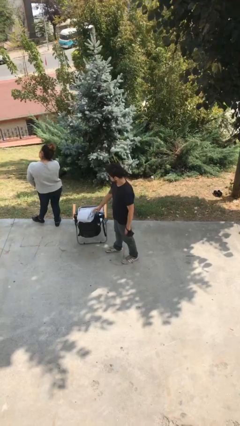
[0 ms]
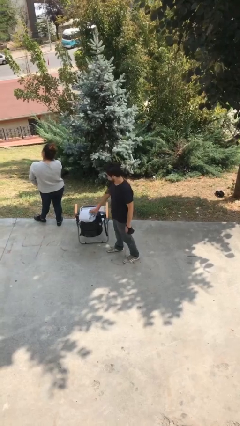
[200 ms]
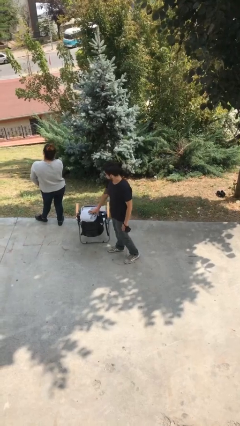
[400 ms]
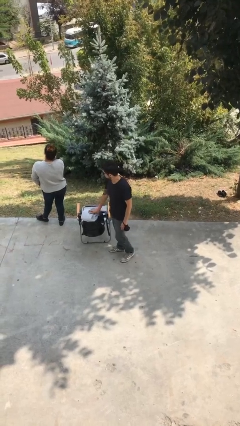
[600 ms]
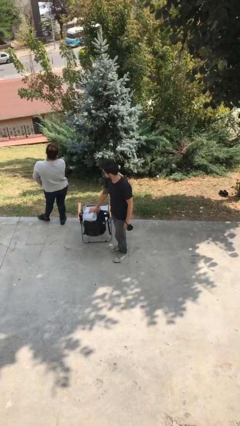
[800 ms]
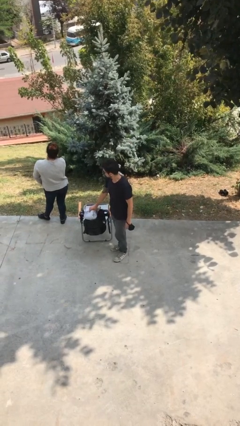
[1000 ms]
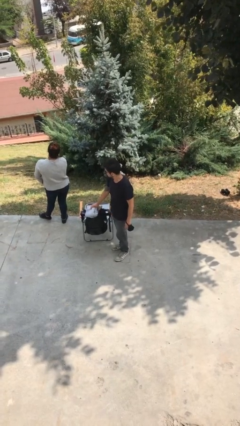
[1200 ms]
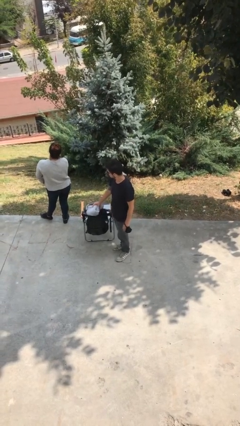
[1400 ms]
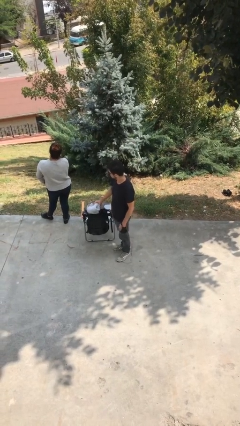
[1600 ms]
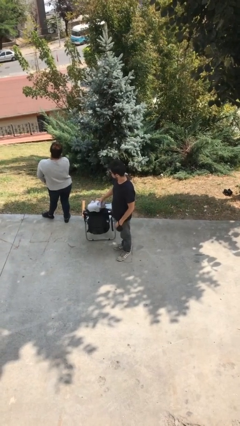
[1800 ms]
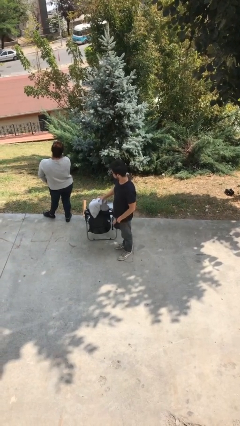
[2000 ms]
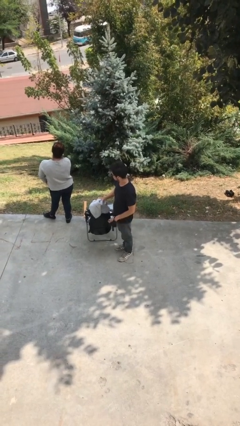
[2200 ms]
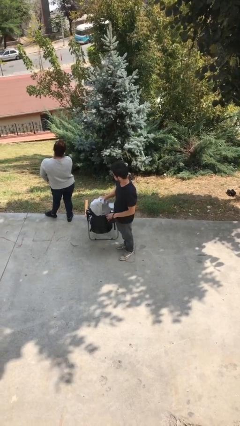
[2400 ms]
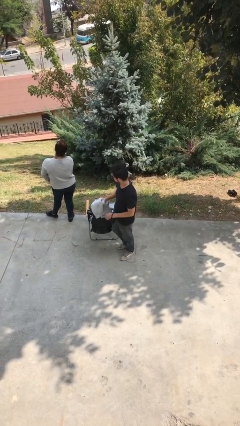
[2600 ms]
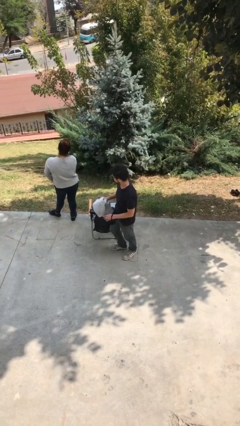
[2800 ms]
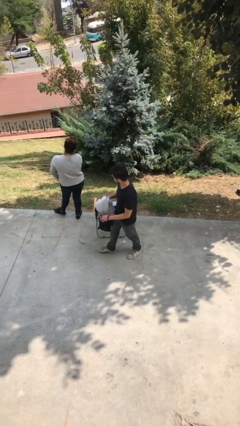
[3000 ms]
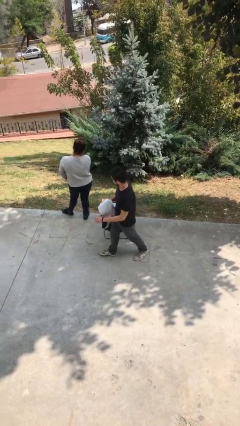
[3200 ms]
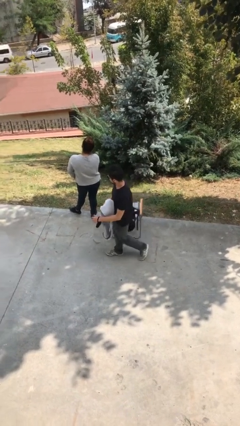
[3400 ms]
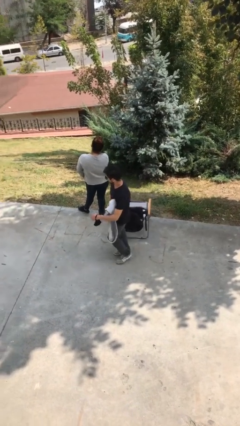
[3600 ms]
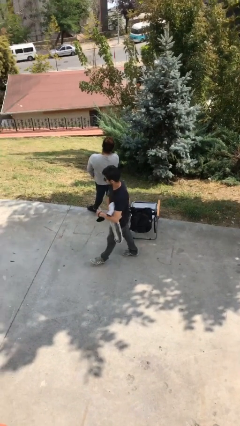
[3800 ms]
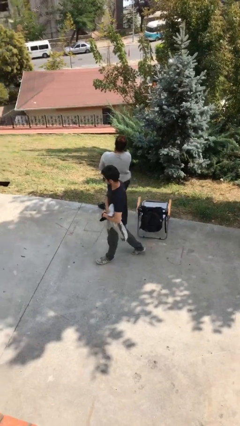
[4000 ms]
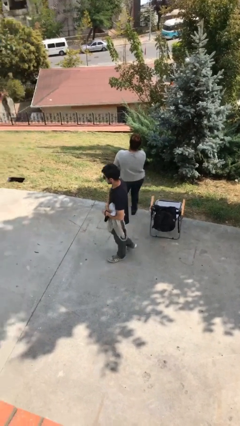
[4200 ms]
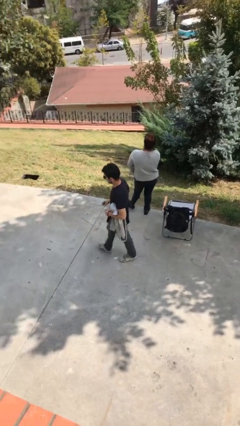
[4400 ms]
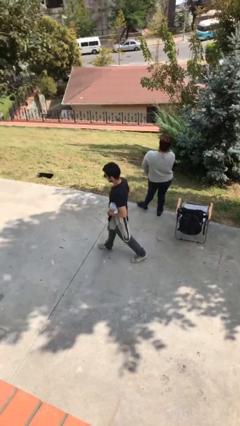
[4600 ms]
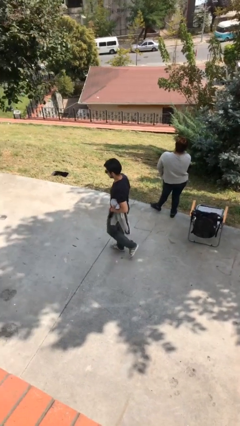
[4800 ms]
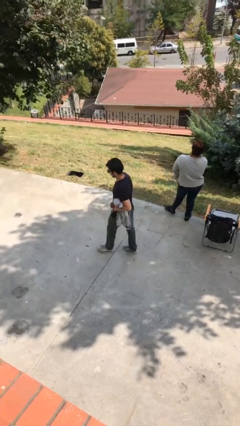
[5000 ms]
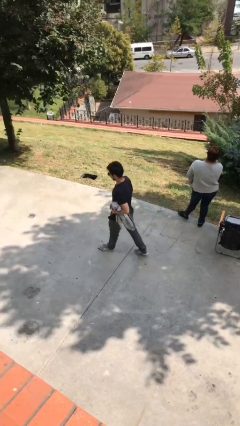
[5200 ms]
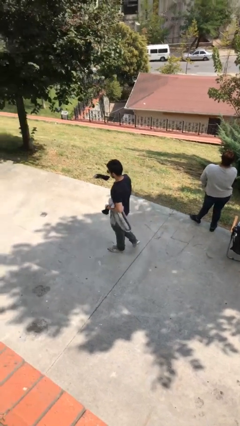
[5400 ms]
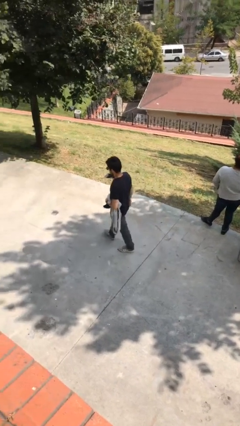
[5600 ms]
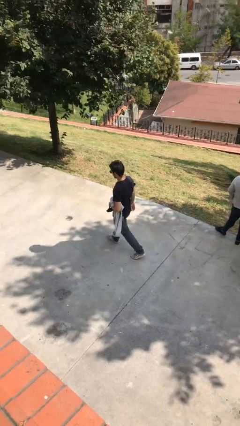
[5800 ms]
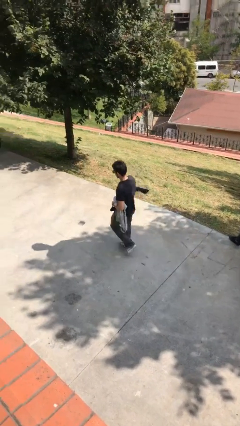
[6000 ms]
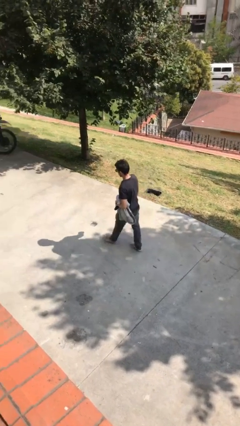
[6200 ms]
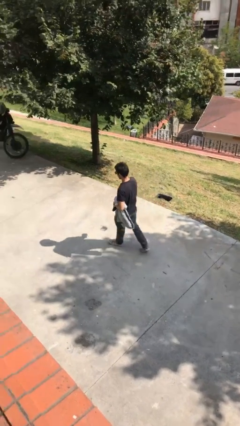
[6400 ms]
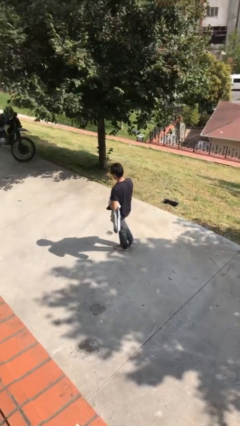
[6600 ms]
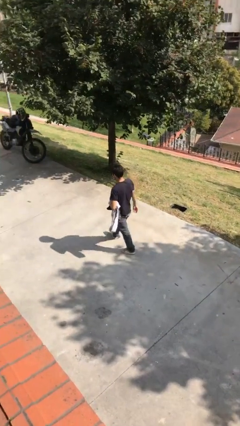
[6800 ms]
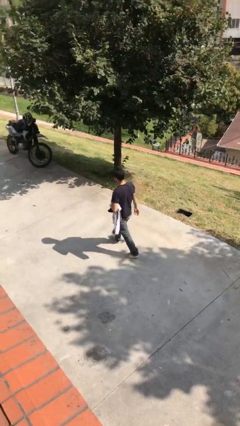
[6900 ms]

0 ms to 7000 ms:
person steals object from person

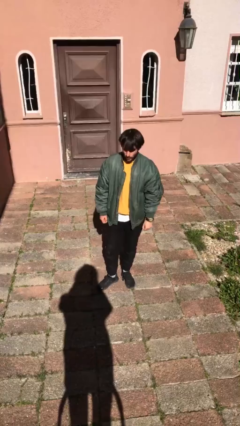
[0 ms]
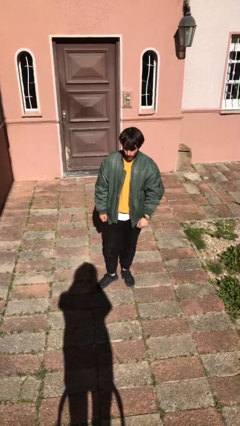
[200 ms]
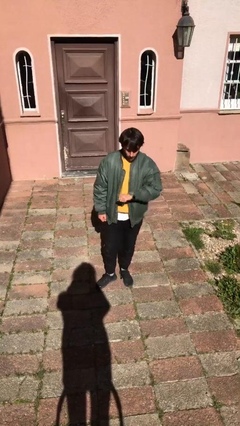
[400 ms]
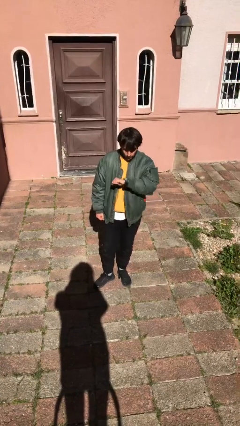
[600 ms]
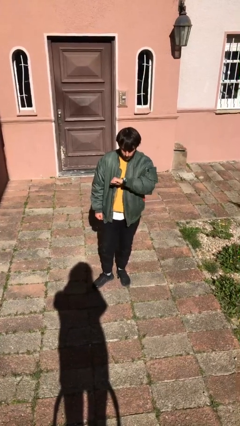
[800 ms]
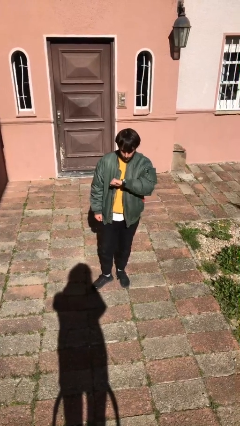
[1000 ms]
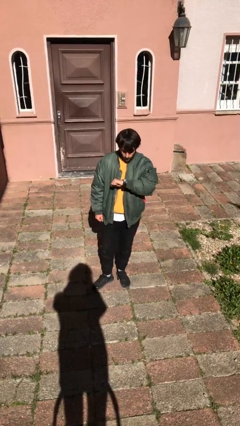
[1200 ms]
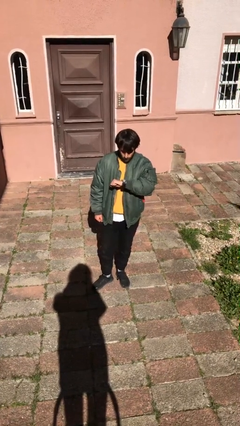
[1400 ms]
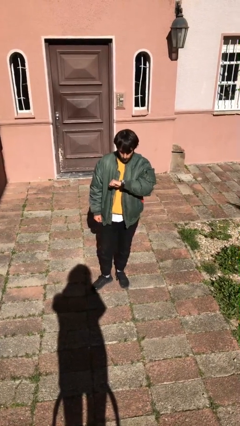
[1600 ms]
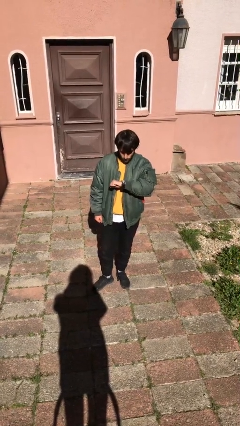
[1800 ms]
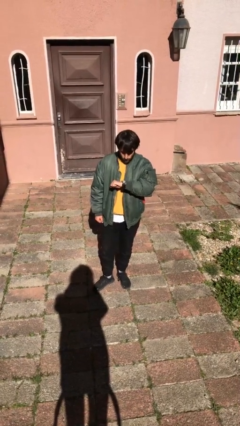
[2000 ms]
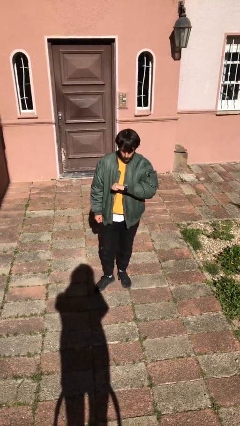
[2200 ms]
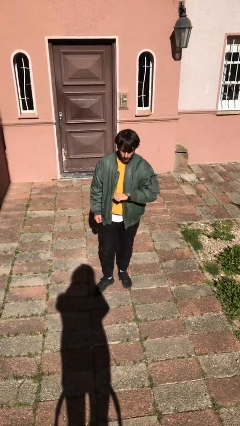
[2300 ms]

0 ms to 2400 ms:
person looks at wristwatch

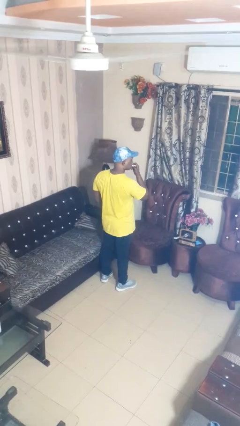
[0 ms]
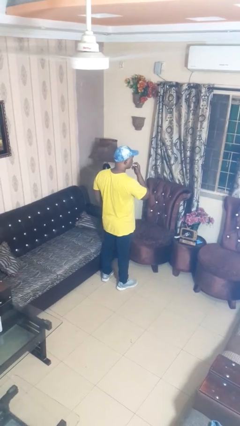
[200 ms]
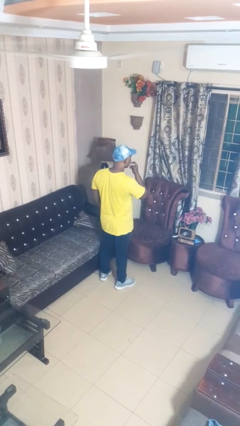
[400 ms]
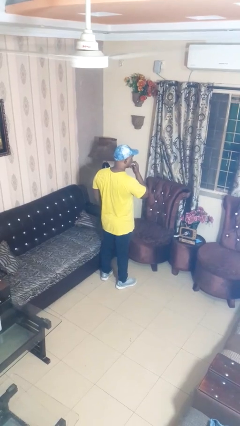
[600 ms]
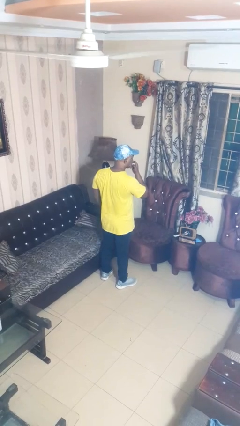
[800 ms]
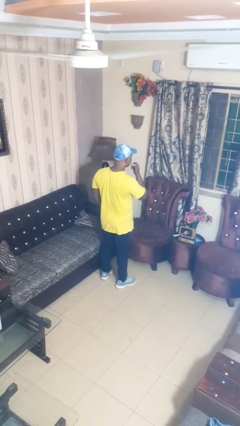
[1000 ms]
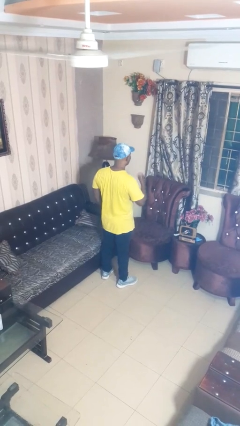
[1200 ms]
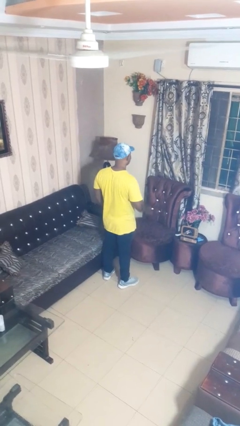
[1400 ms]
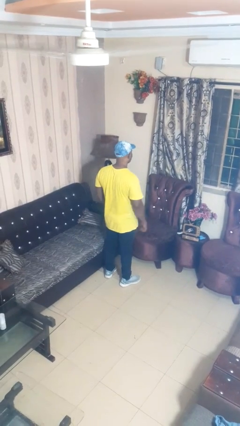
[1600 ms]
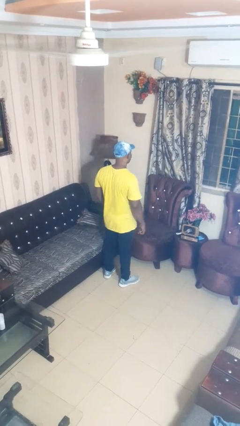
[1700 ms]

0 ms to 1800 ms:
person applies lip makeup

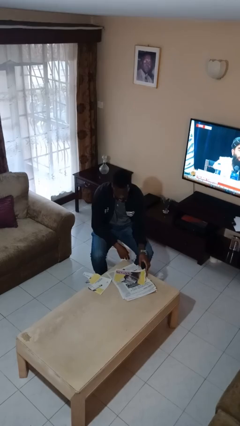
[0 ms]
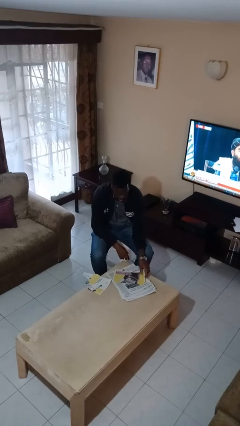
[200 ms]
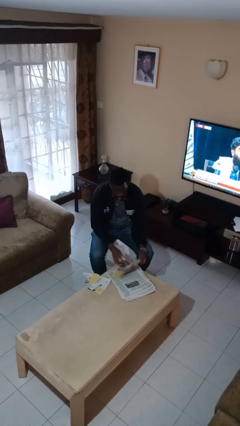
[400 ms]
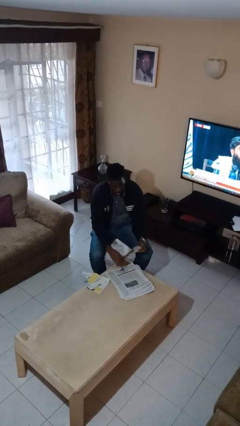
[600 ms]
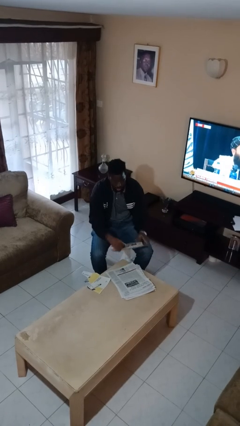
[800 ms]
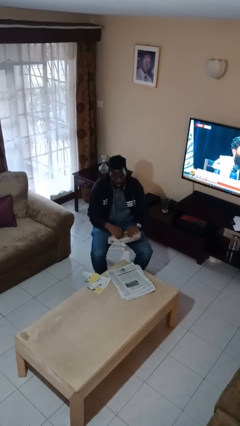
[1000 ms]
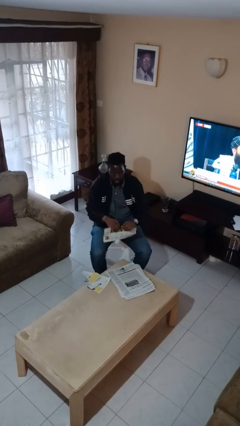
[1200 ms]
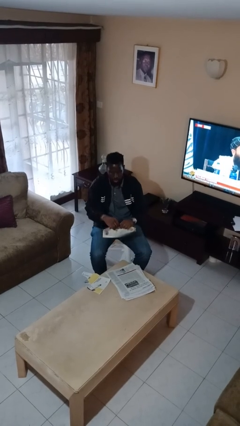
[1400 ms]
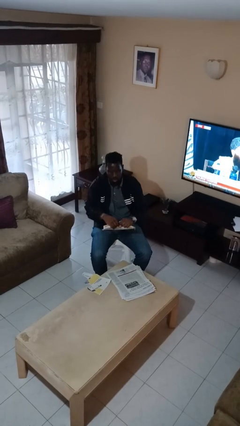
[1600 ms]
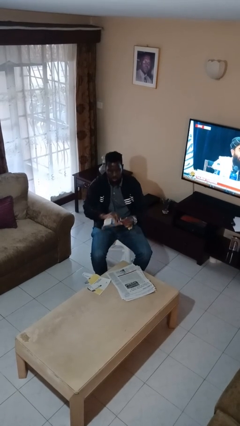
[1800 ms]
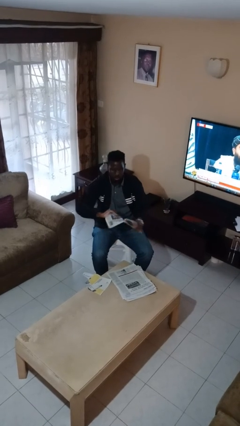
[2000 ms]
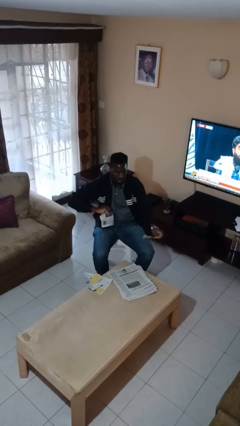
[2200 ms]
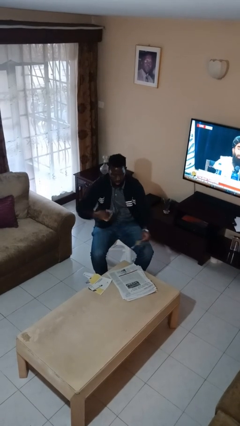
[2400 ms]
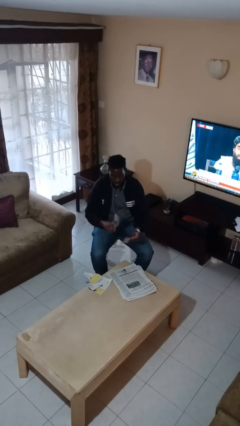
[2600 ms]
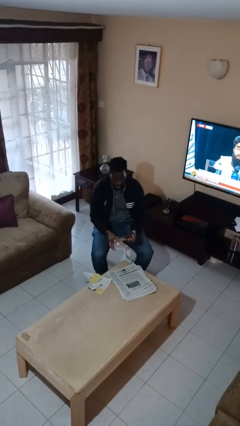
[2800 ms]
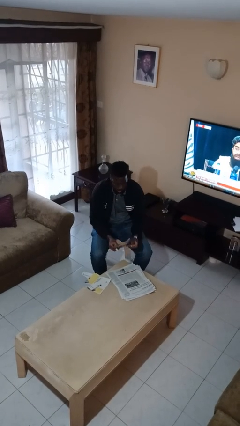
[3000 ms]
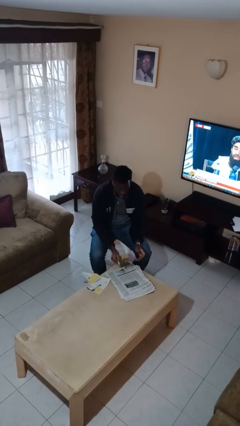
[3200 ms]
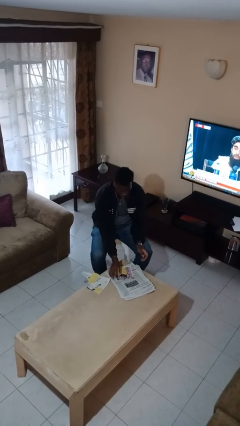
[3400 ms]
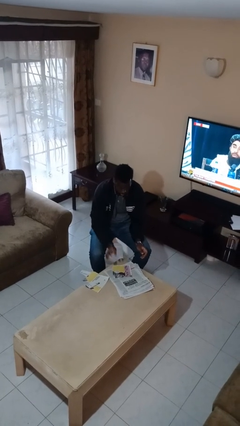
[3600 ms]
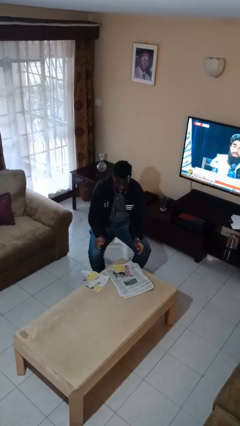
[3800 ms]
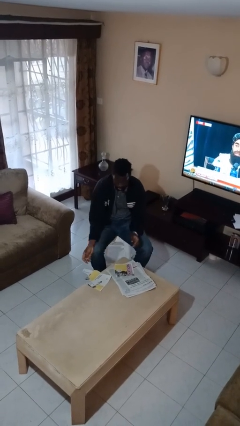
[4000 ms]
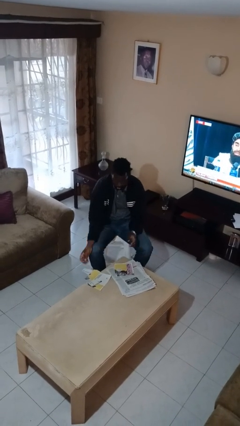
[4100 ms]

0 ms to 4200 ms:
person tears paper

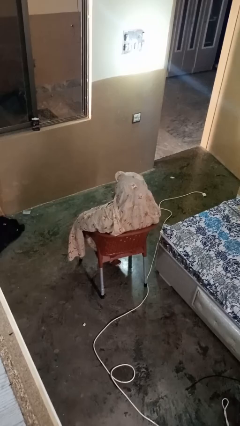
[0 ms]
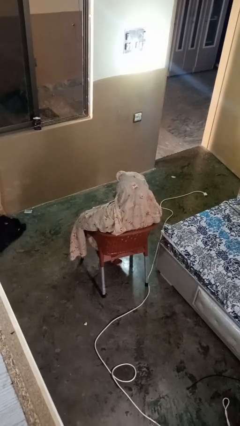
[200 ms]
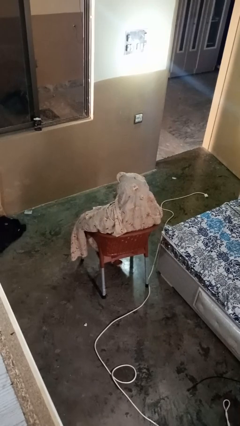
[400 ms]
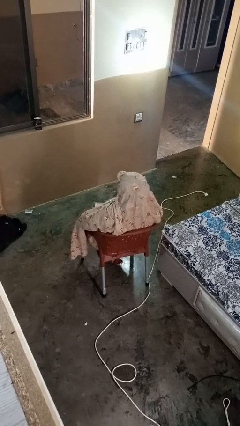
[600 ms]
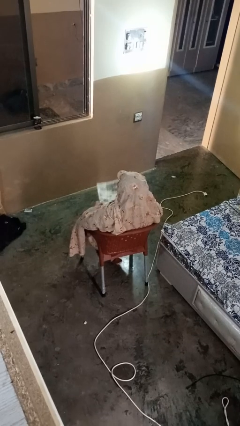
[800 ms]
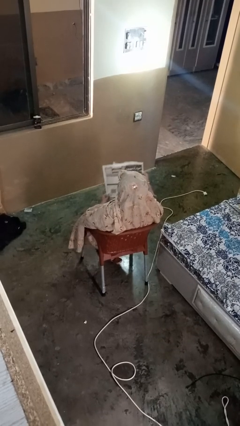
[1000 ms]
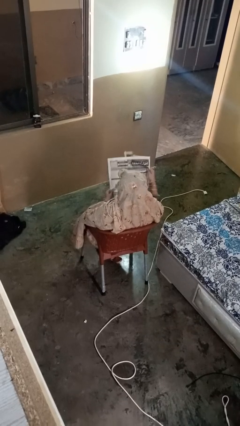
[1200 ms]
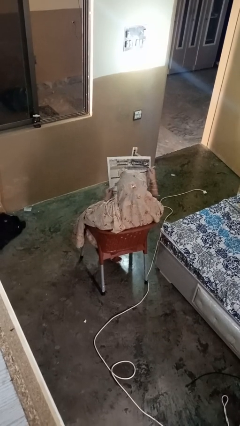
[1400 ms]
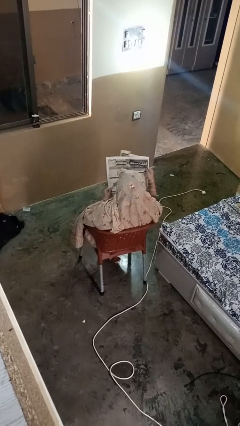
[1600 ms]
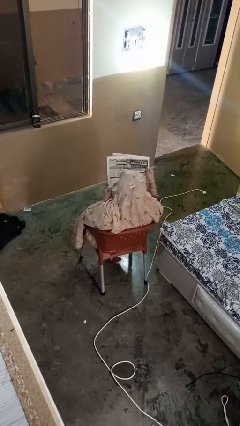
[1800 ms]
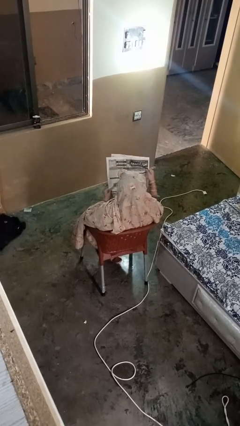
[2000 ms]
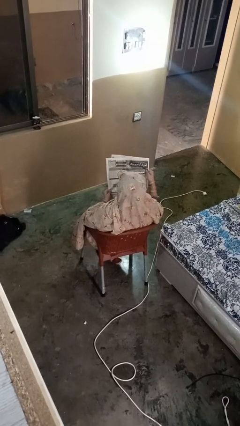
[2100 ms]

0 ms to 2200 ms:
person reads newspaper

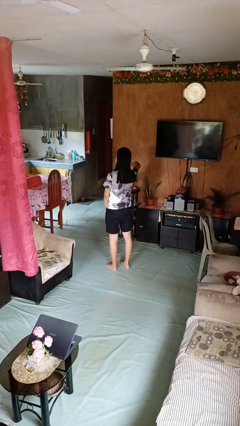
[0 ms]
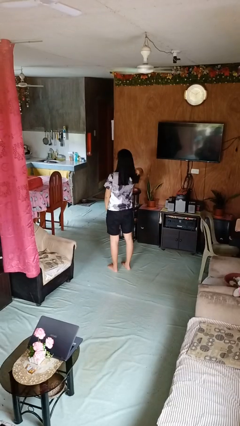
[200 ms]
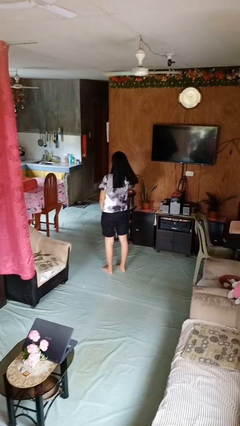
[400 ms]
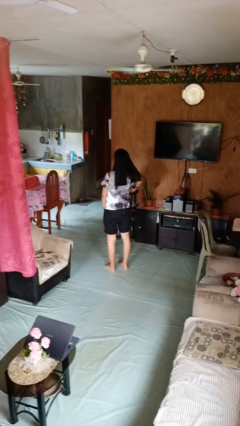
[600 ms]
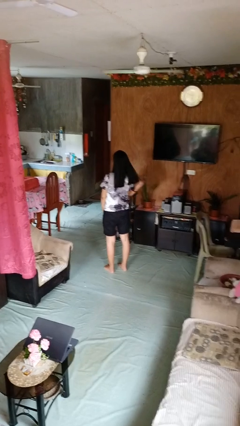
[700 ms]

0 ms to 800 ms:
person strokes hair
